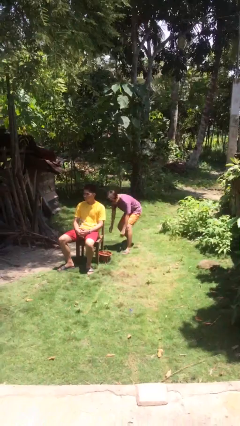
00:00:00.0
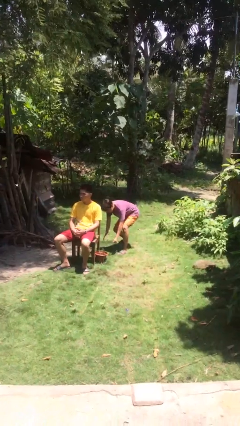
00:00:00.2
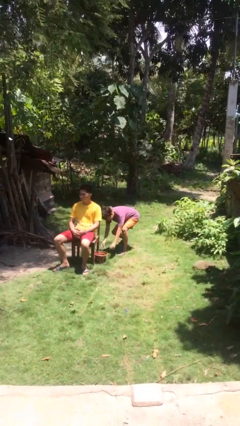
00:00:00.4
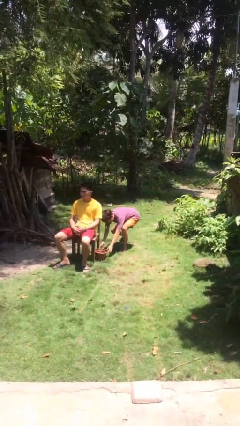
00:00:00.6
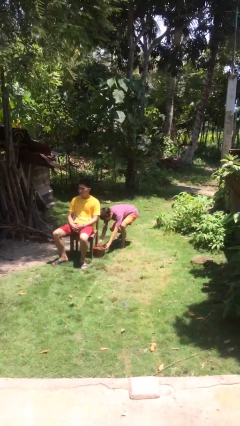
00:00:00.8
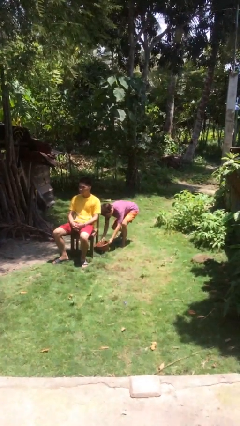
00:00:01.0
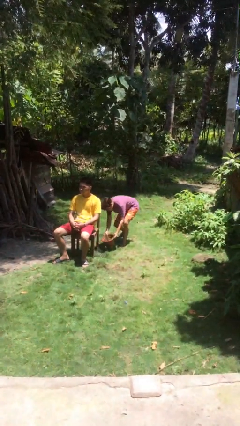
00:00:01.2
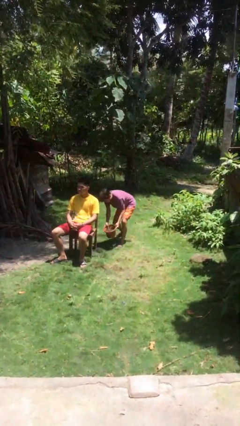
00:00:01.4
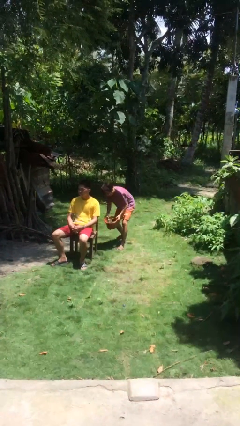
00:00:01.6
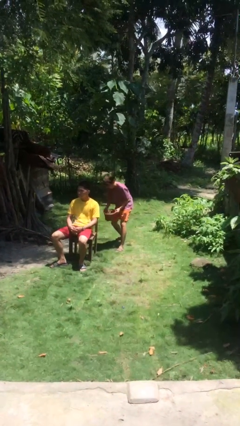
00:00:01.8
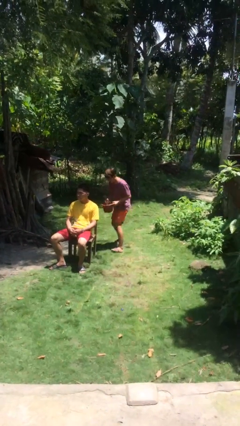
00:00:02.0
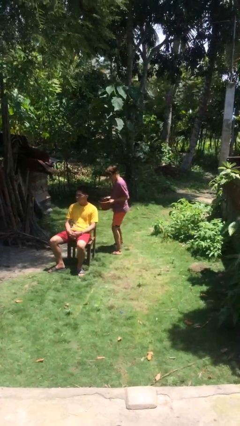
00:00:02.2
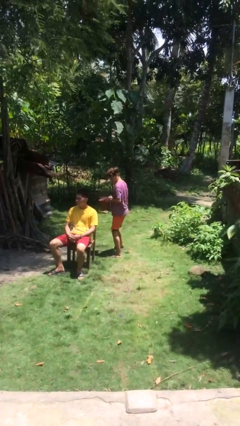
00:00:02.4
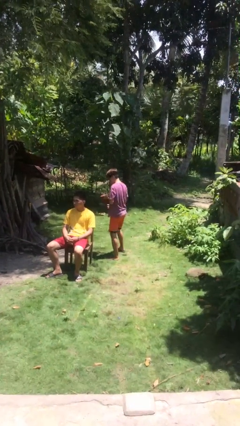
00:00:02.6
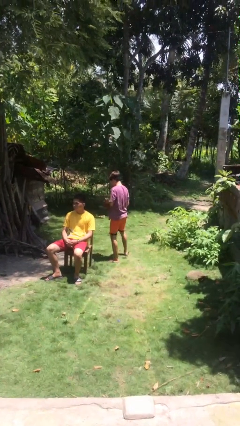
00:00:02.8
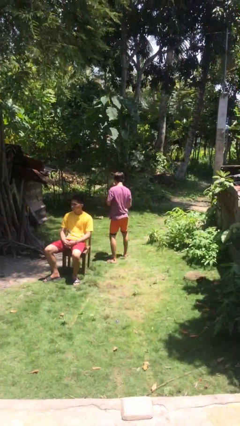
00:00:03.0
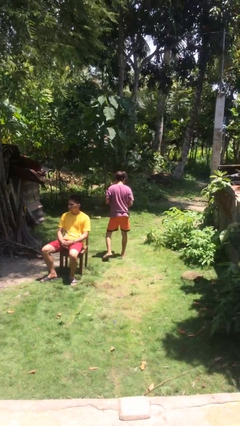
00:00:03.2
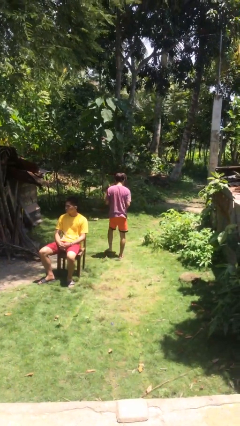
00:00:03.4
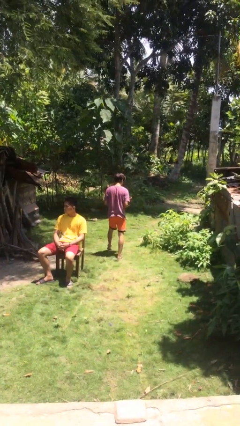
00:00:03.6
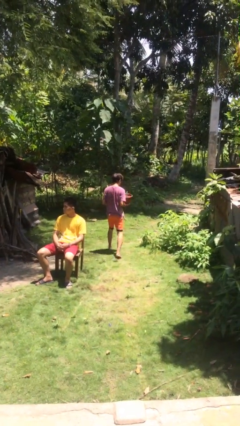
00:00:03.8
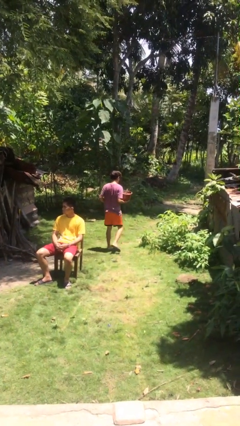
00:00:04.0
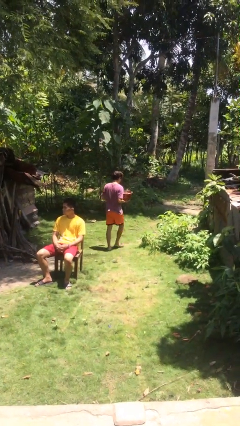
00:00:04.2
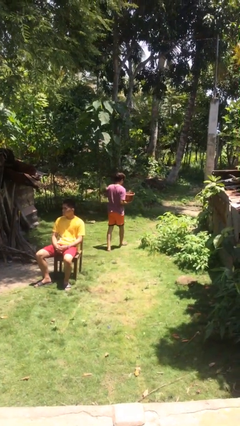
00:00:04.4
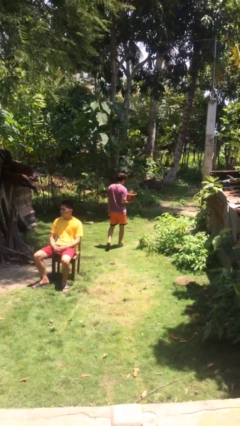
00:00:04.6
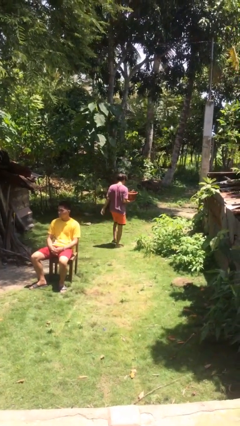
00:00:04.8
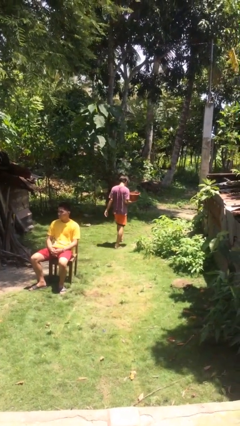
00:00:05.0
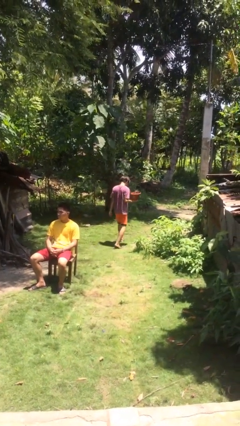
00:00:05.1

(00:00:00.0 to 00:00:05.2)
person steals object from person

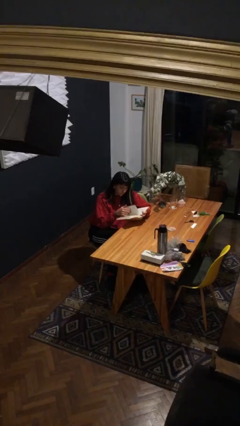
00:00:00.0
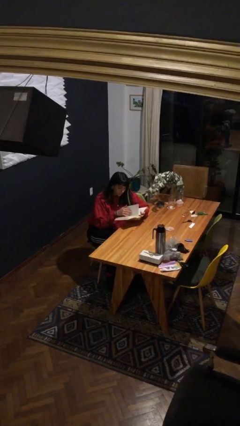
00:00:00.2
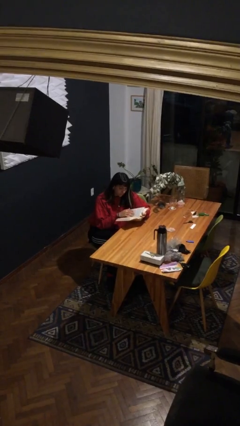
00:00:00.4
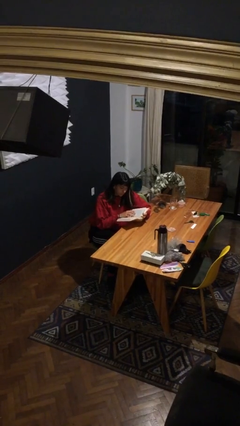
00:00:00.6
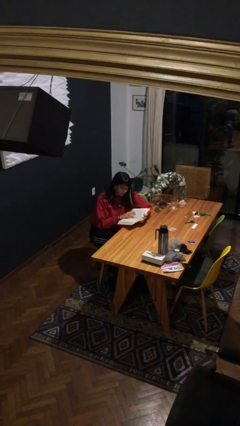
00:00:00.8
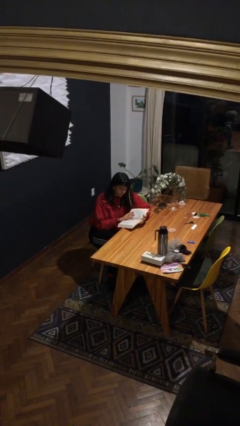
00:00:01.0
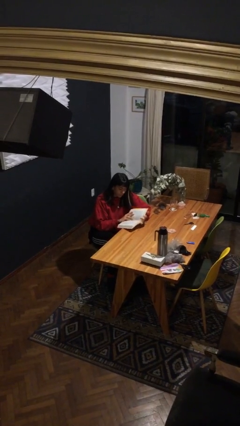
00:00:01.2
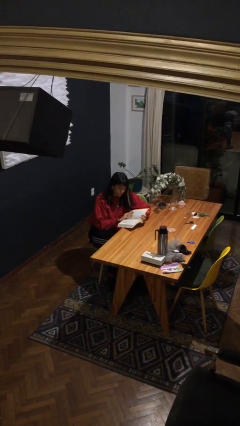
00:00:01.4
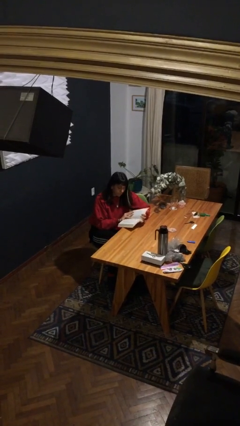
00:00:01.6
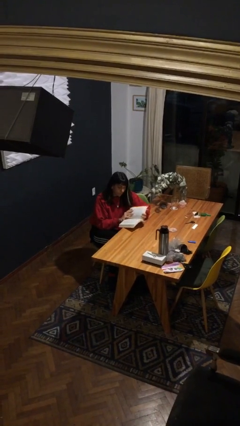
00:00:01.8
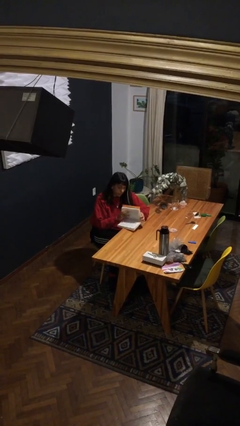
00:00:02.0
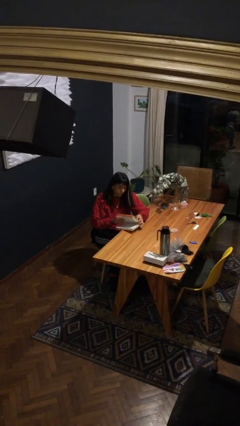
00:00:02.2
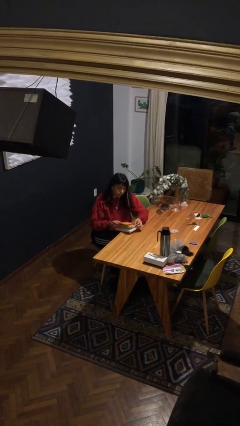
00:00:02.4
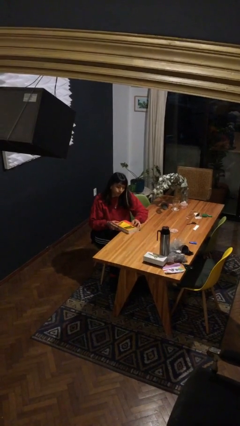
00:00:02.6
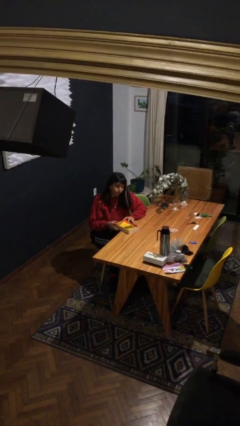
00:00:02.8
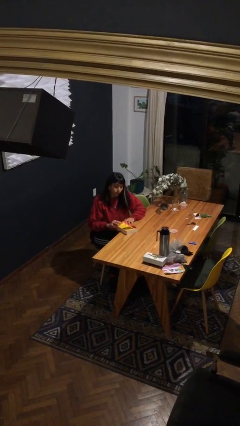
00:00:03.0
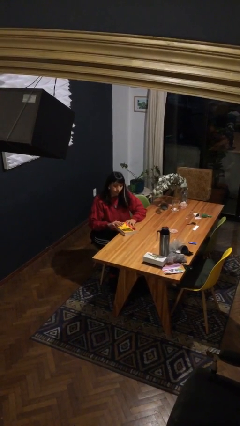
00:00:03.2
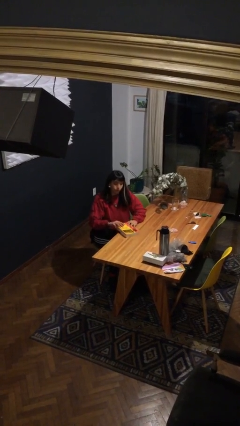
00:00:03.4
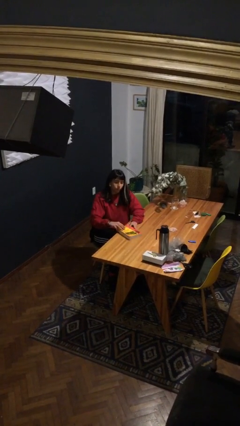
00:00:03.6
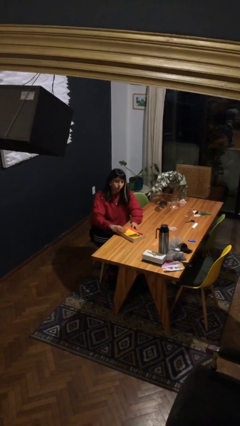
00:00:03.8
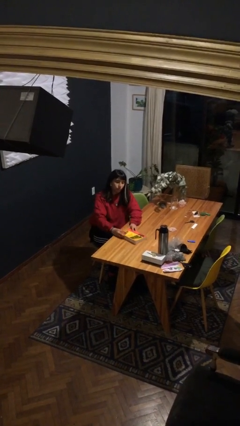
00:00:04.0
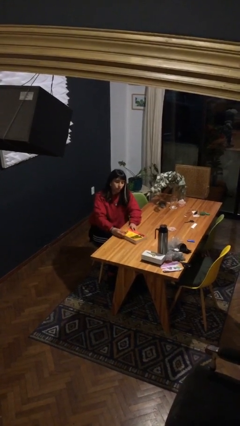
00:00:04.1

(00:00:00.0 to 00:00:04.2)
person puts down object on table

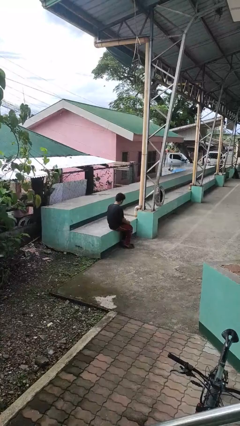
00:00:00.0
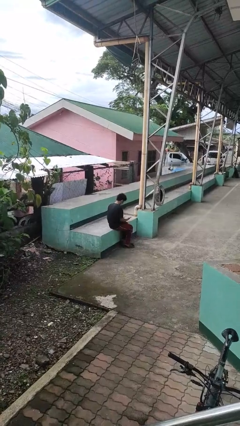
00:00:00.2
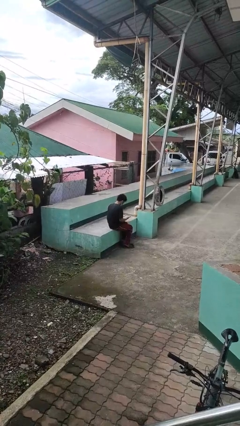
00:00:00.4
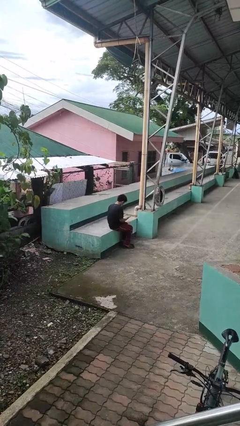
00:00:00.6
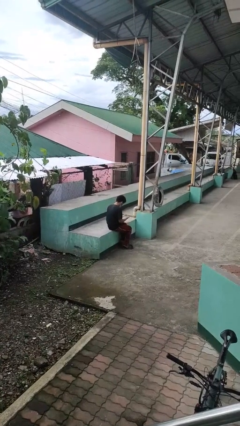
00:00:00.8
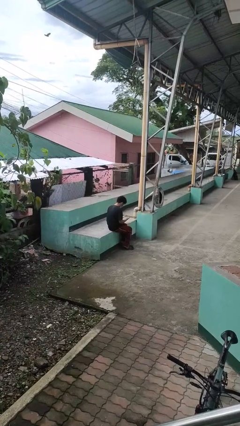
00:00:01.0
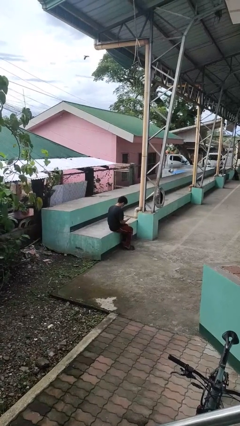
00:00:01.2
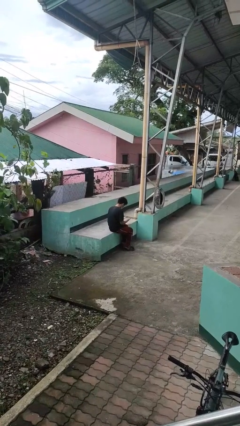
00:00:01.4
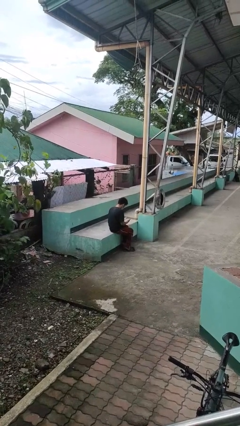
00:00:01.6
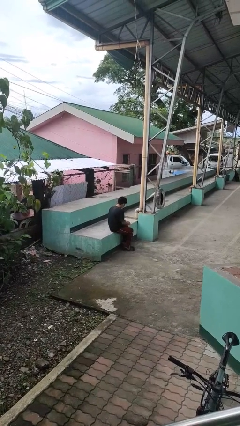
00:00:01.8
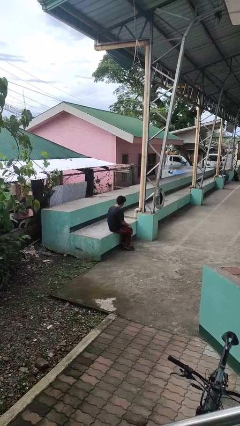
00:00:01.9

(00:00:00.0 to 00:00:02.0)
person looks at hands in lap

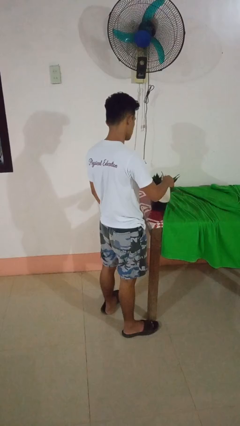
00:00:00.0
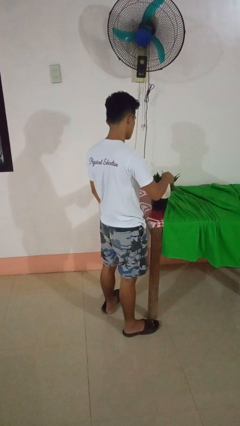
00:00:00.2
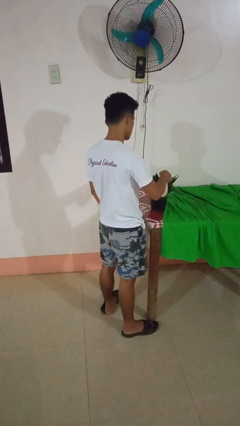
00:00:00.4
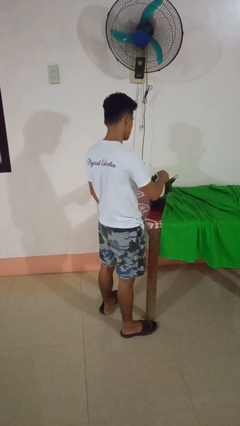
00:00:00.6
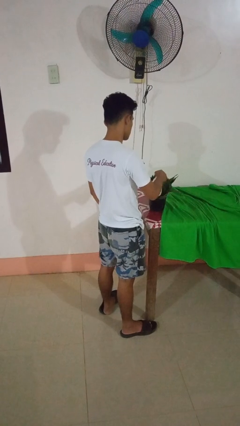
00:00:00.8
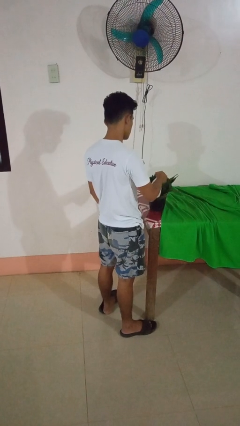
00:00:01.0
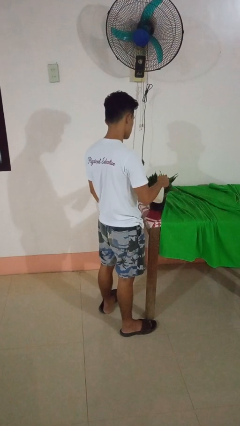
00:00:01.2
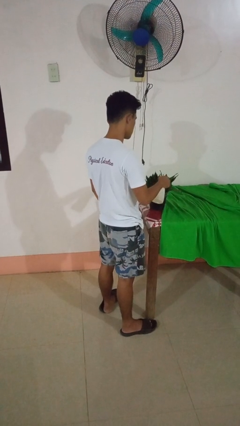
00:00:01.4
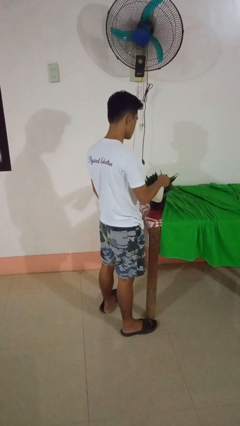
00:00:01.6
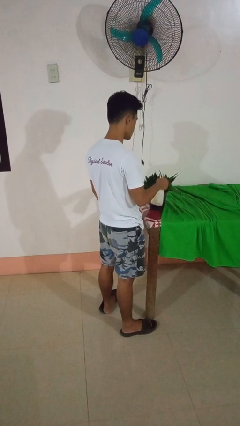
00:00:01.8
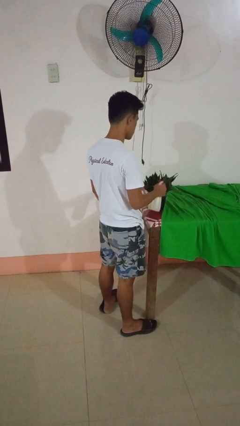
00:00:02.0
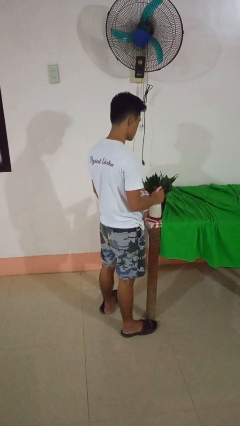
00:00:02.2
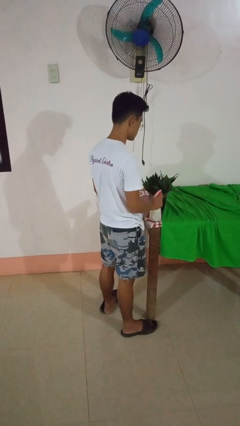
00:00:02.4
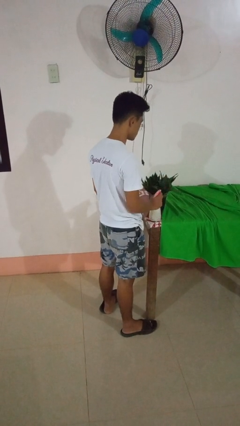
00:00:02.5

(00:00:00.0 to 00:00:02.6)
person waters houseplant

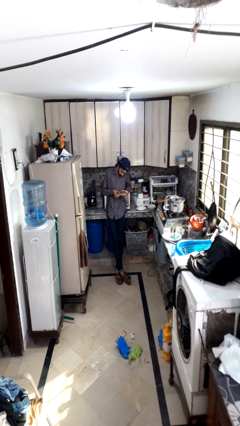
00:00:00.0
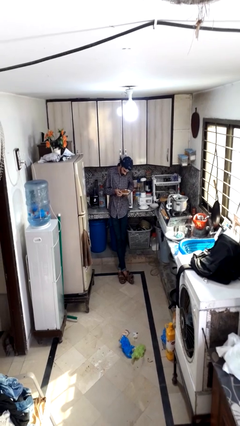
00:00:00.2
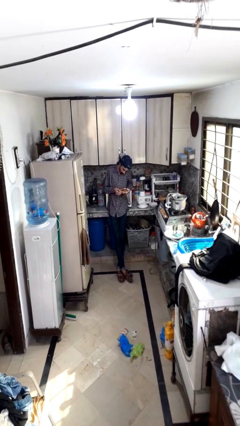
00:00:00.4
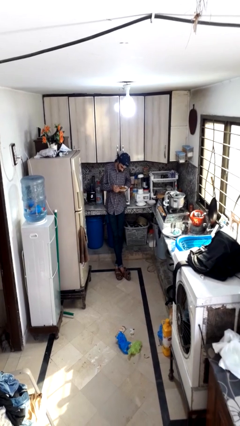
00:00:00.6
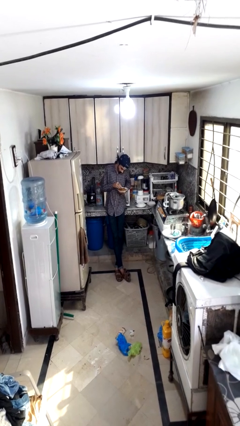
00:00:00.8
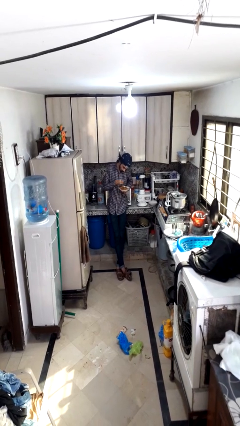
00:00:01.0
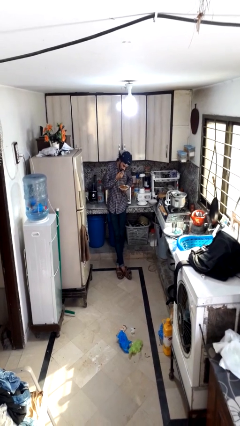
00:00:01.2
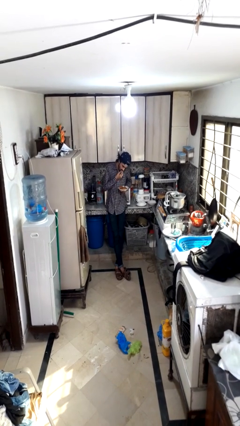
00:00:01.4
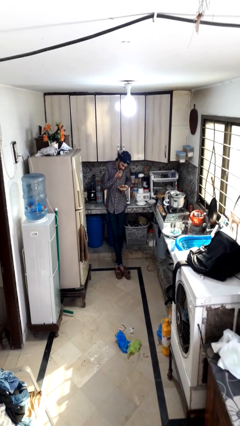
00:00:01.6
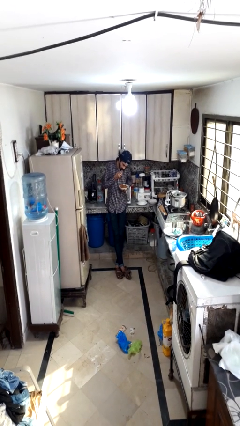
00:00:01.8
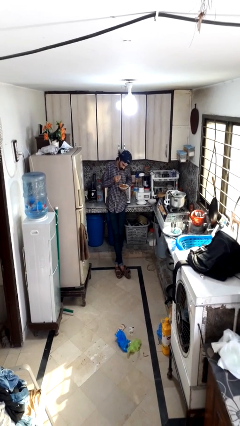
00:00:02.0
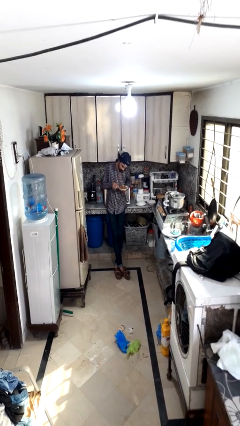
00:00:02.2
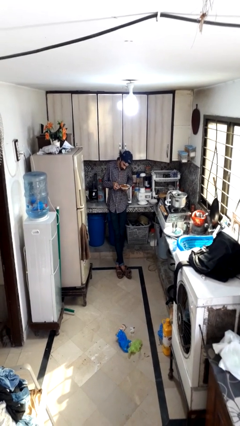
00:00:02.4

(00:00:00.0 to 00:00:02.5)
person eats with hands

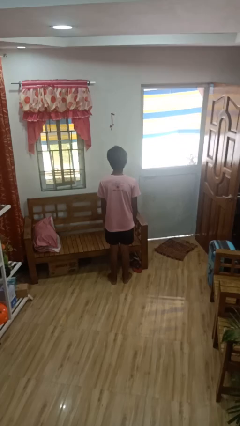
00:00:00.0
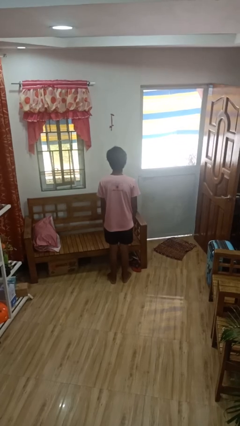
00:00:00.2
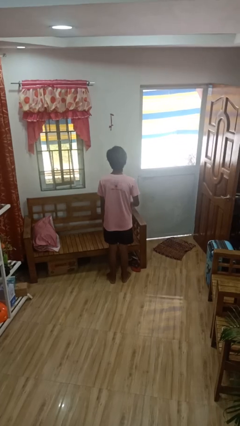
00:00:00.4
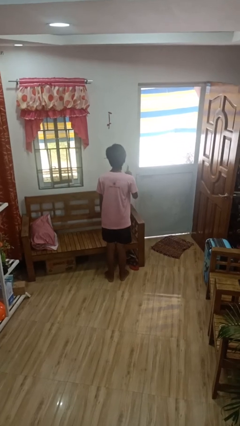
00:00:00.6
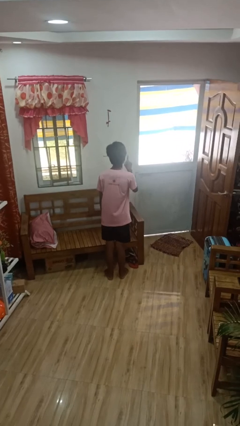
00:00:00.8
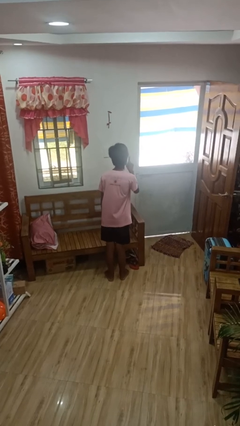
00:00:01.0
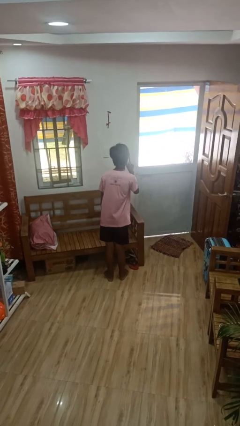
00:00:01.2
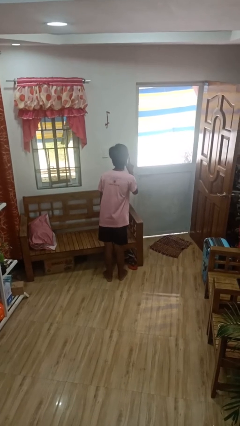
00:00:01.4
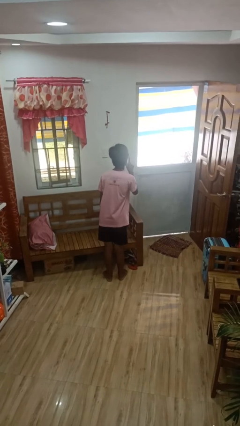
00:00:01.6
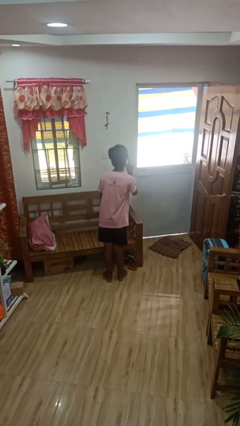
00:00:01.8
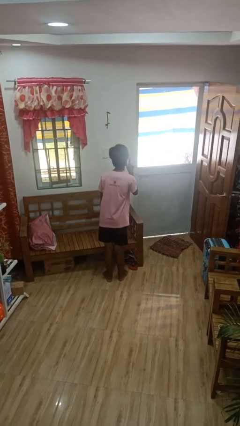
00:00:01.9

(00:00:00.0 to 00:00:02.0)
person gestures be quiet